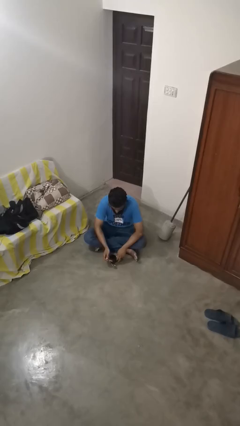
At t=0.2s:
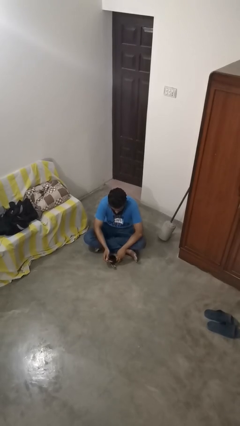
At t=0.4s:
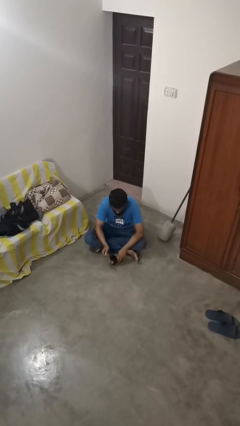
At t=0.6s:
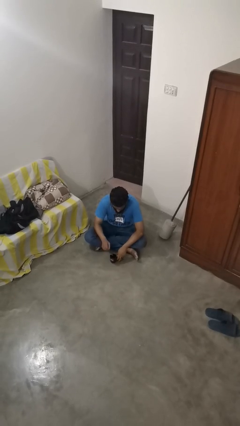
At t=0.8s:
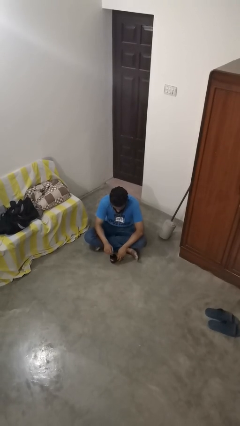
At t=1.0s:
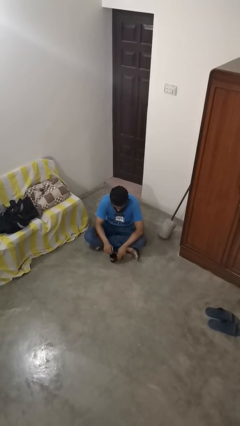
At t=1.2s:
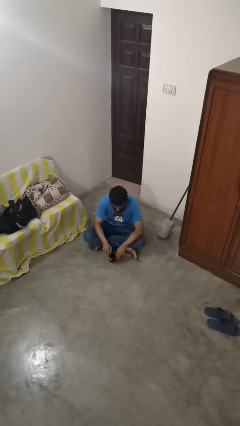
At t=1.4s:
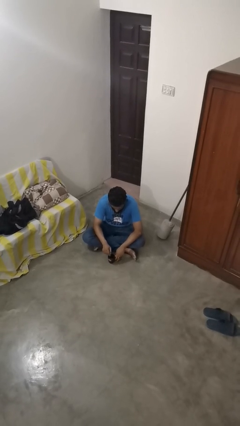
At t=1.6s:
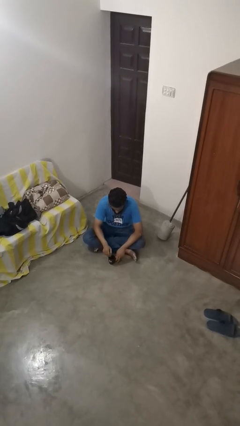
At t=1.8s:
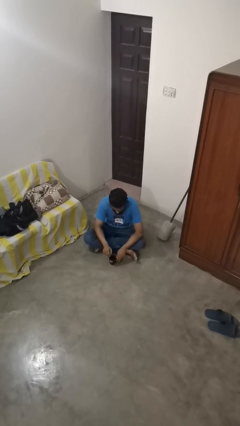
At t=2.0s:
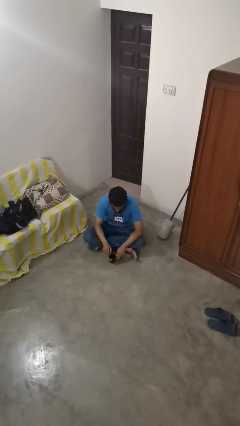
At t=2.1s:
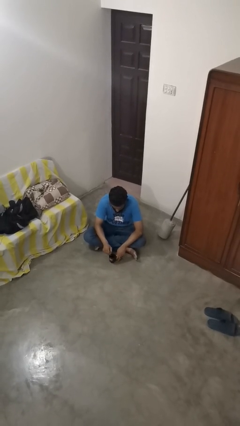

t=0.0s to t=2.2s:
person stirs mug

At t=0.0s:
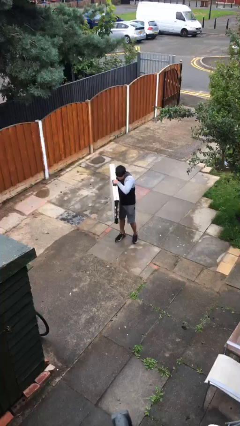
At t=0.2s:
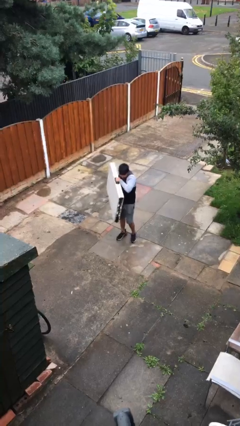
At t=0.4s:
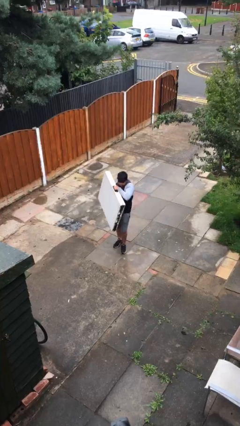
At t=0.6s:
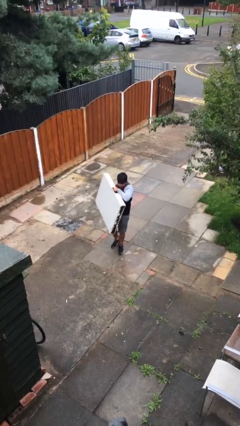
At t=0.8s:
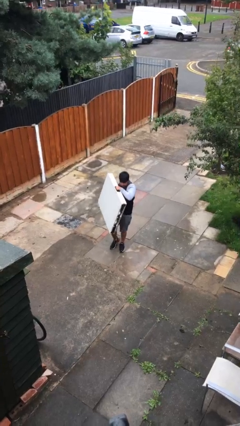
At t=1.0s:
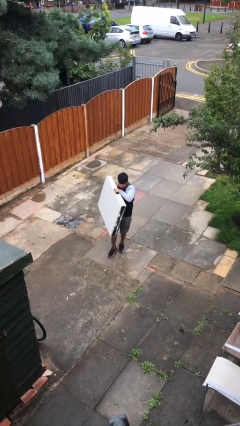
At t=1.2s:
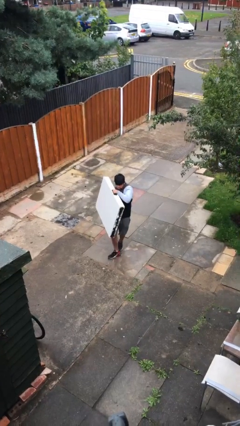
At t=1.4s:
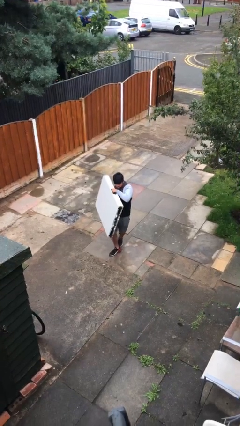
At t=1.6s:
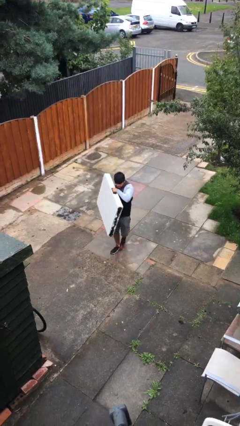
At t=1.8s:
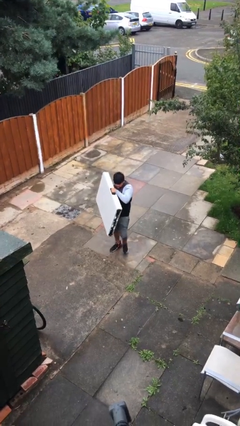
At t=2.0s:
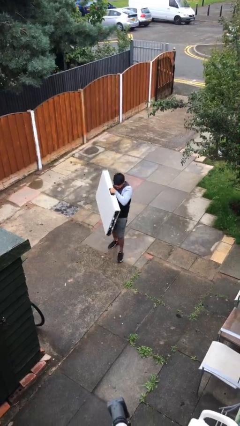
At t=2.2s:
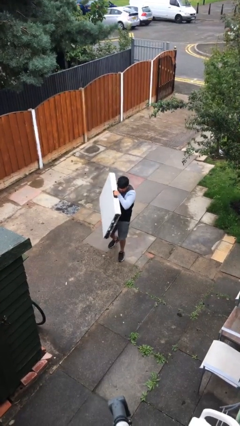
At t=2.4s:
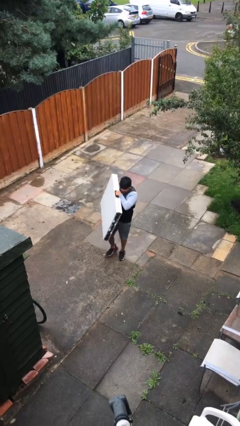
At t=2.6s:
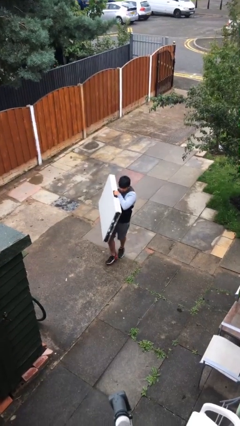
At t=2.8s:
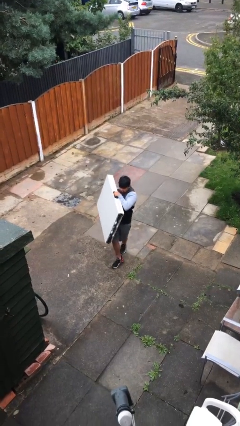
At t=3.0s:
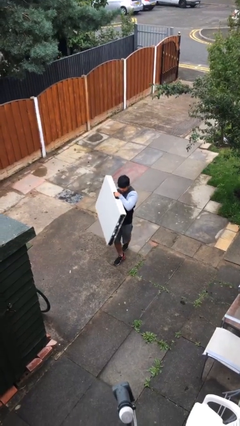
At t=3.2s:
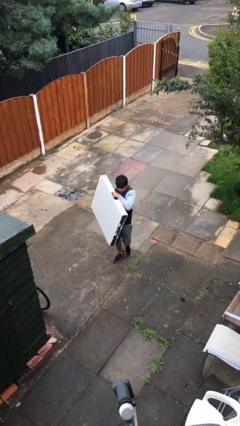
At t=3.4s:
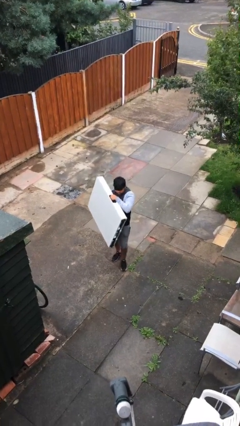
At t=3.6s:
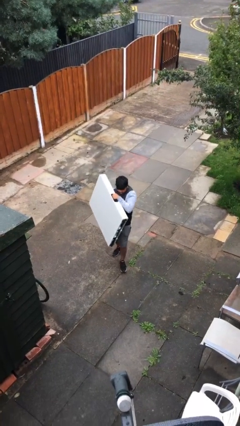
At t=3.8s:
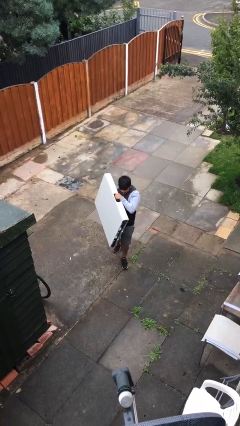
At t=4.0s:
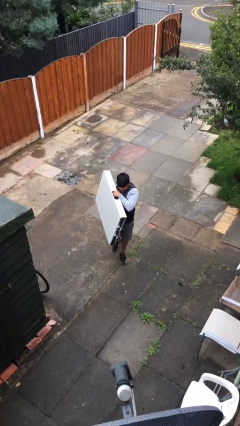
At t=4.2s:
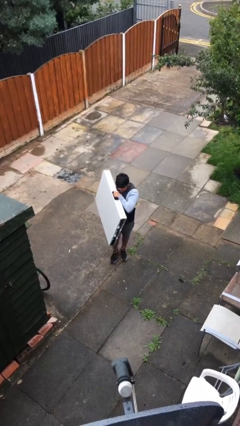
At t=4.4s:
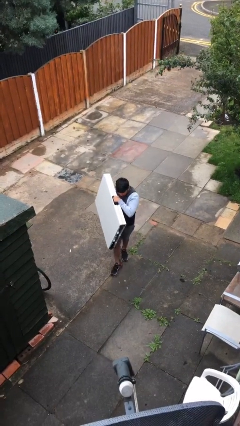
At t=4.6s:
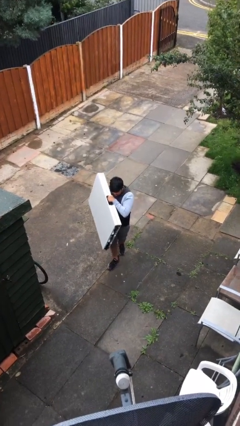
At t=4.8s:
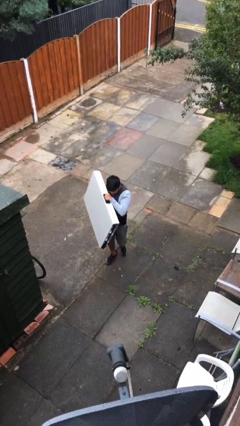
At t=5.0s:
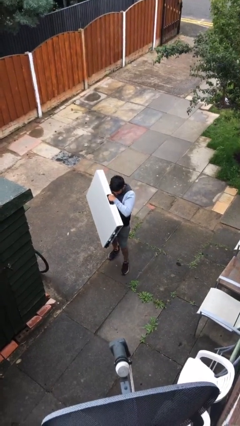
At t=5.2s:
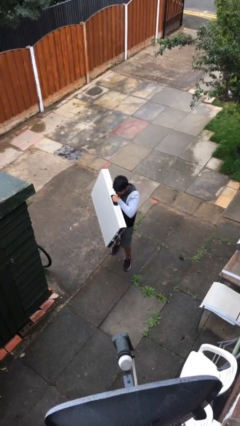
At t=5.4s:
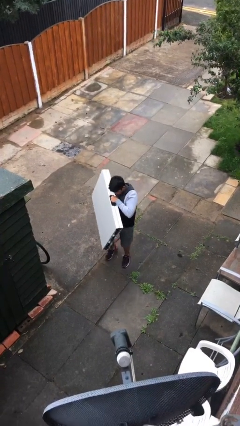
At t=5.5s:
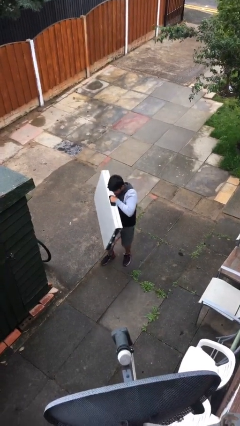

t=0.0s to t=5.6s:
person carries heavy object

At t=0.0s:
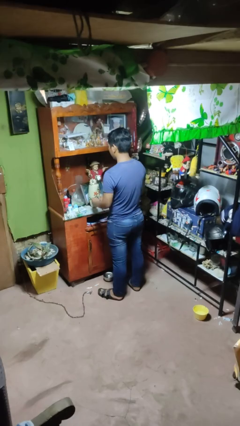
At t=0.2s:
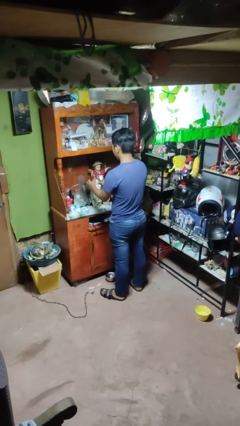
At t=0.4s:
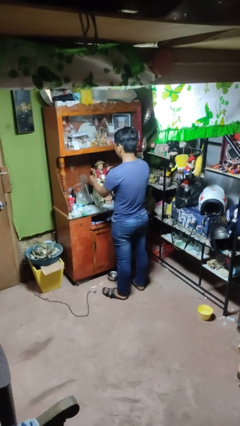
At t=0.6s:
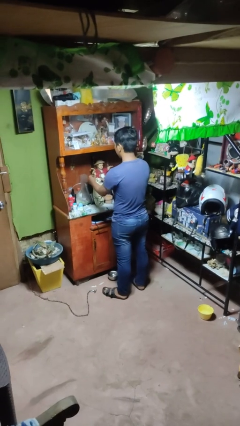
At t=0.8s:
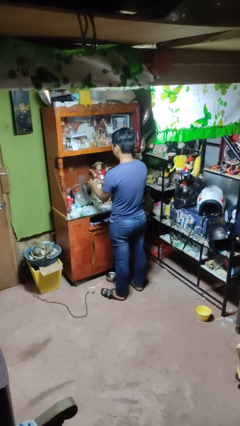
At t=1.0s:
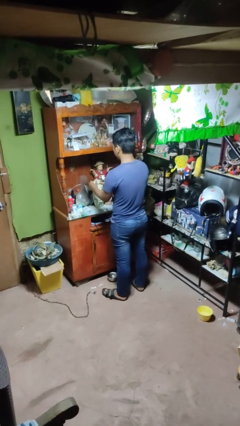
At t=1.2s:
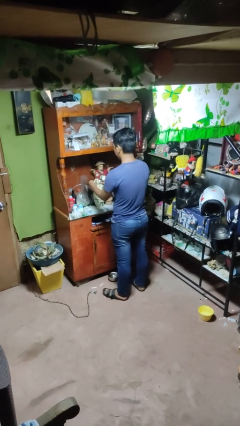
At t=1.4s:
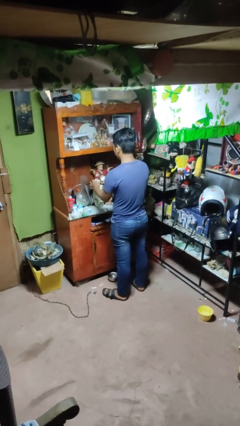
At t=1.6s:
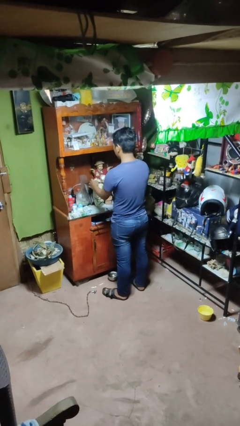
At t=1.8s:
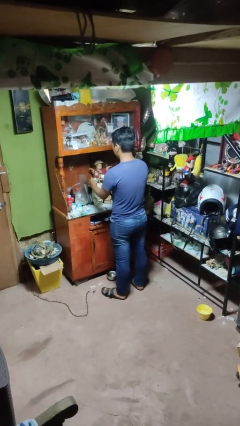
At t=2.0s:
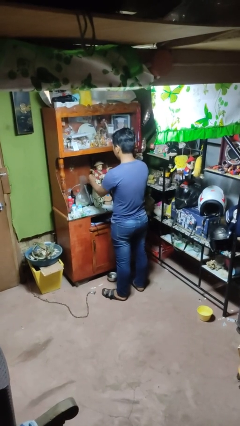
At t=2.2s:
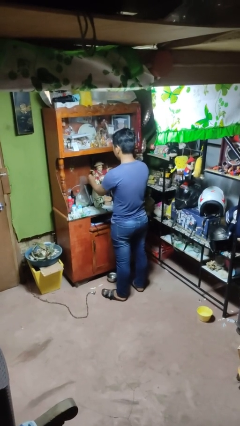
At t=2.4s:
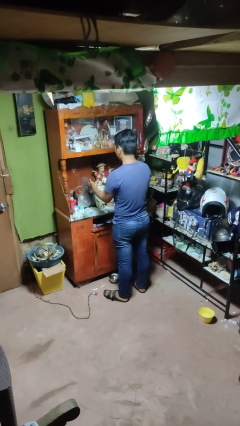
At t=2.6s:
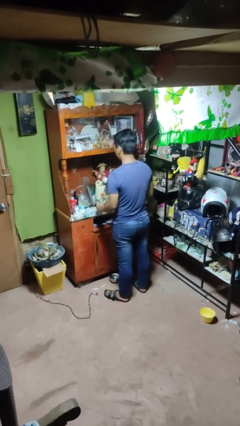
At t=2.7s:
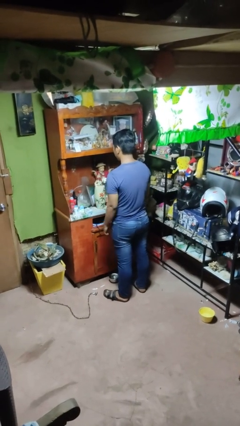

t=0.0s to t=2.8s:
person arranges flowers in vase

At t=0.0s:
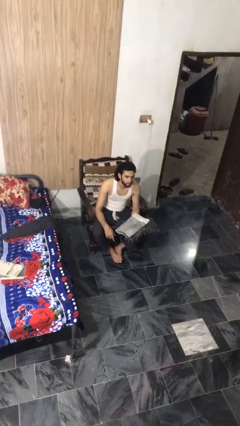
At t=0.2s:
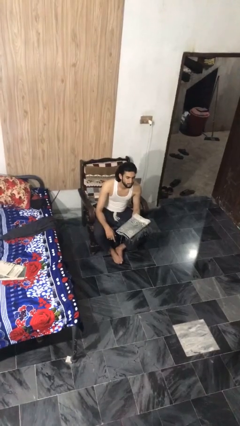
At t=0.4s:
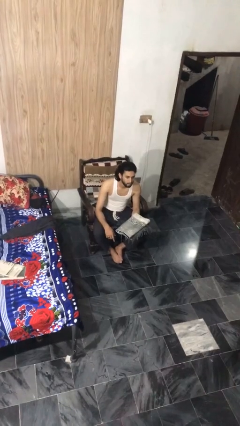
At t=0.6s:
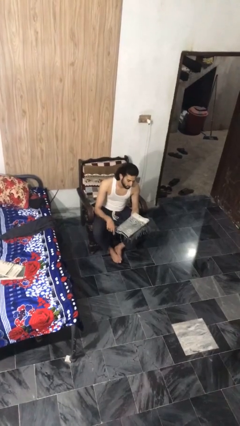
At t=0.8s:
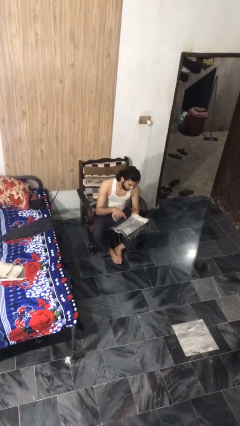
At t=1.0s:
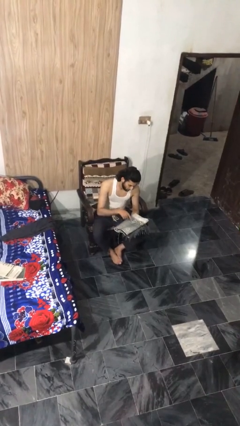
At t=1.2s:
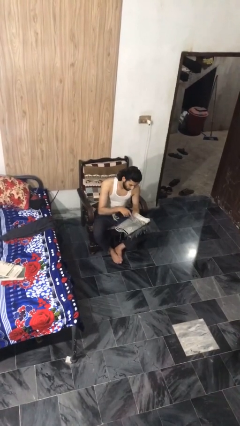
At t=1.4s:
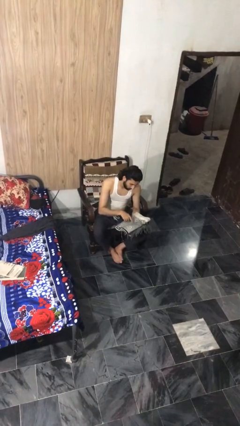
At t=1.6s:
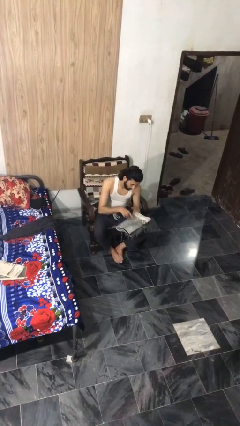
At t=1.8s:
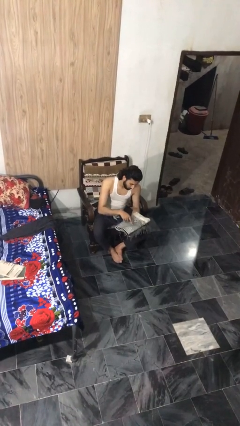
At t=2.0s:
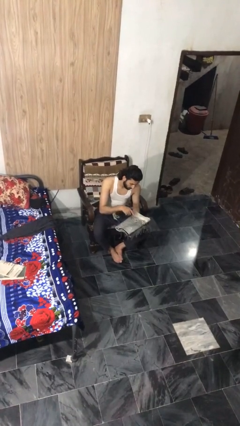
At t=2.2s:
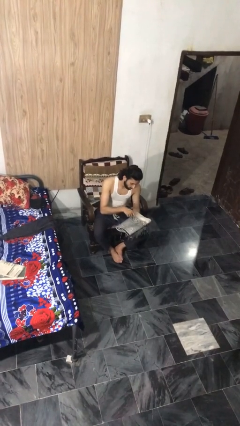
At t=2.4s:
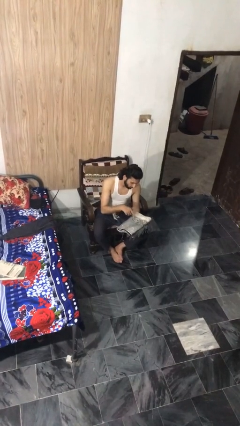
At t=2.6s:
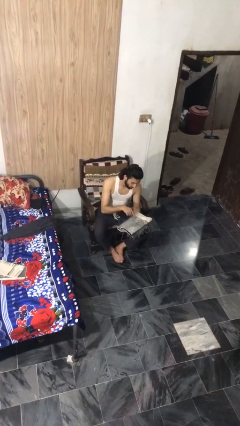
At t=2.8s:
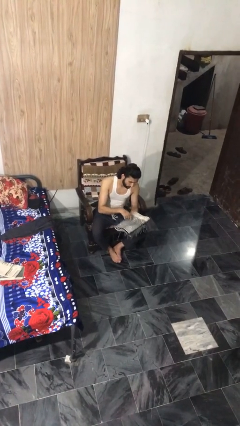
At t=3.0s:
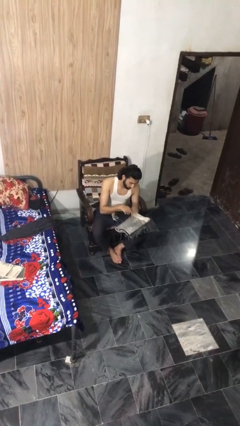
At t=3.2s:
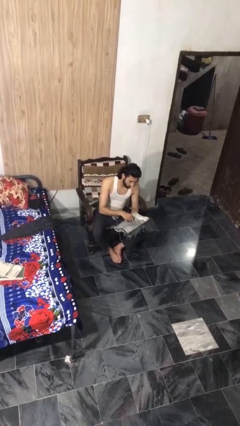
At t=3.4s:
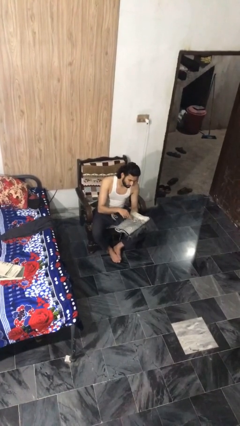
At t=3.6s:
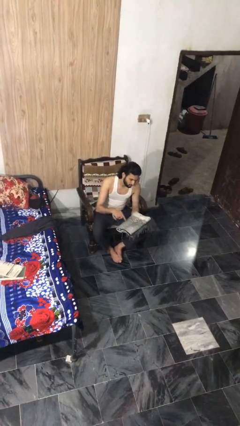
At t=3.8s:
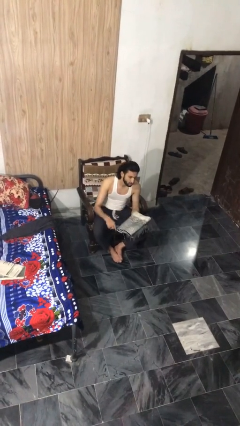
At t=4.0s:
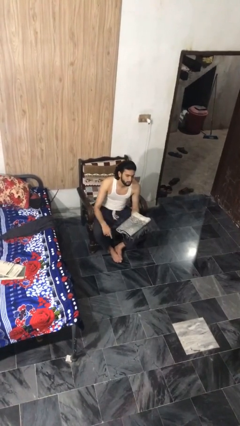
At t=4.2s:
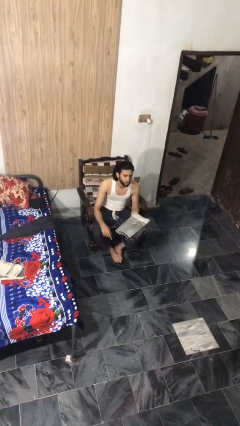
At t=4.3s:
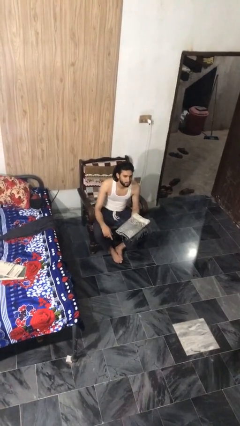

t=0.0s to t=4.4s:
person taps object with finger

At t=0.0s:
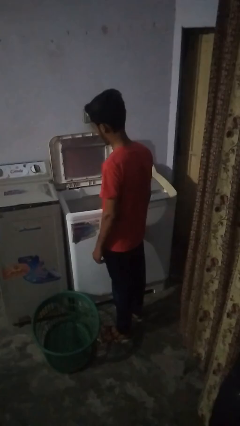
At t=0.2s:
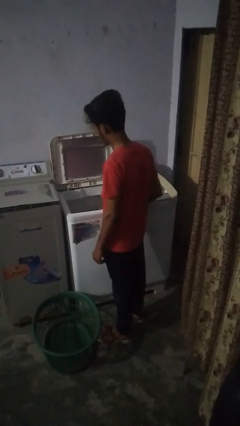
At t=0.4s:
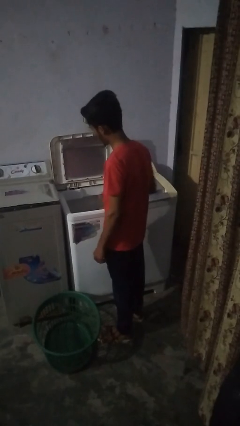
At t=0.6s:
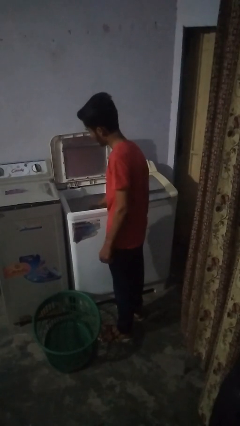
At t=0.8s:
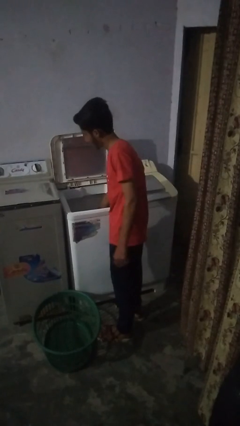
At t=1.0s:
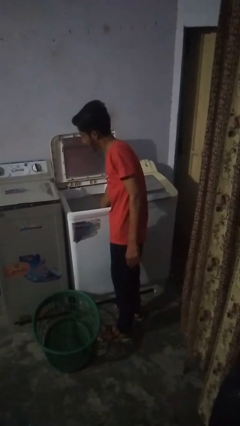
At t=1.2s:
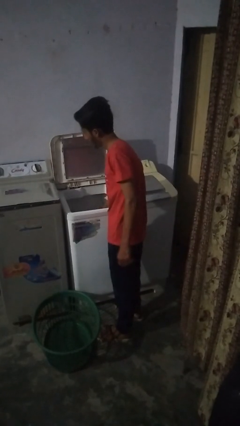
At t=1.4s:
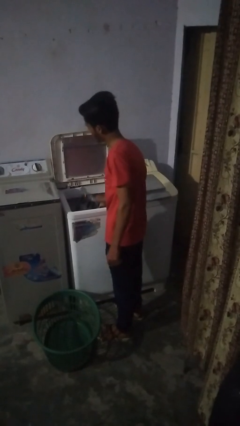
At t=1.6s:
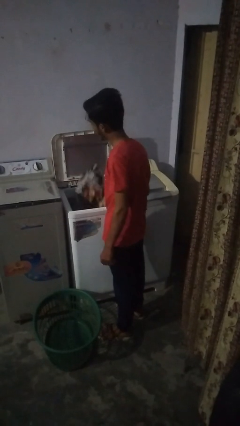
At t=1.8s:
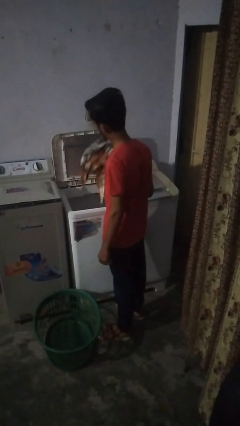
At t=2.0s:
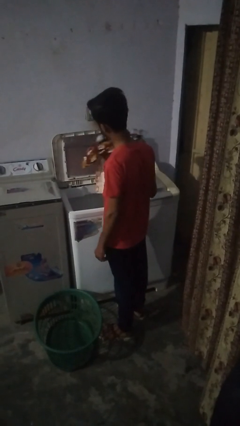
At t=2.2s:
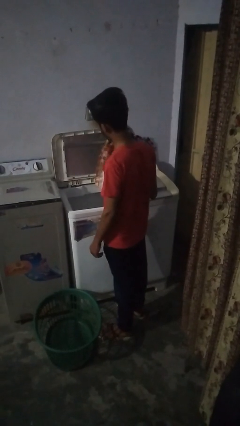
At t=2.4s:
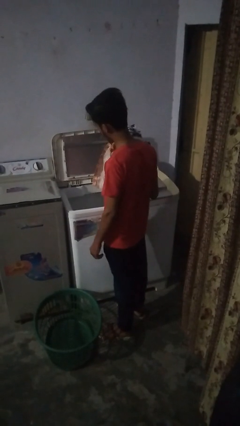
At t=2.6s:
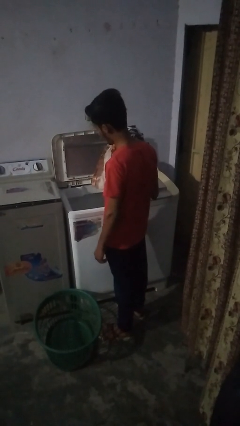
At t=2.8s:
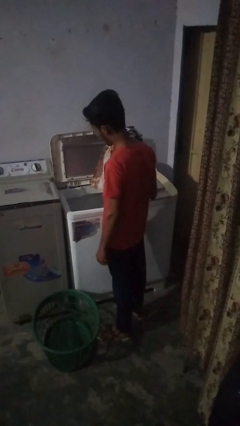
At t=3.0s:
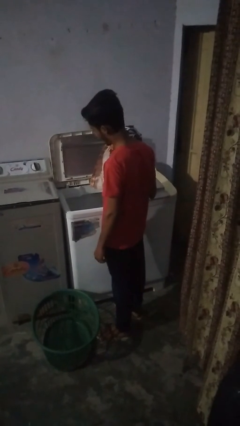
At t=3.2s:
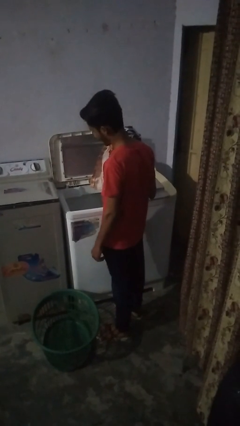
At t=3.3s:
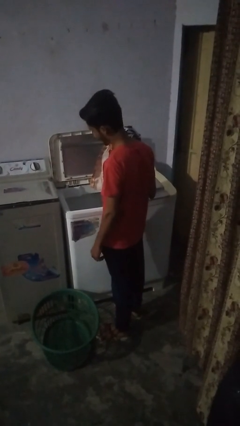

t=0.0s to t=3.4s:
person unloads clotheswasher
